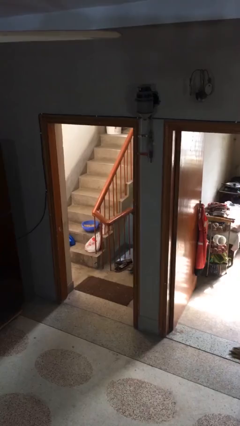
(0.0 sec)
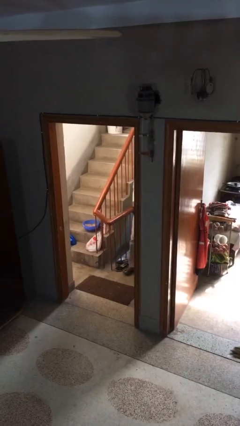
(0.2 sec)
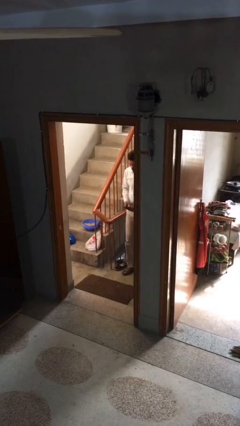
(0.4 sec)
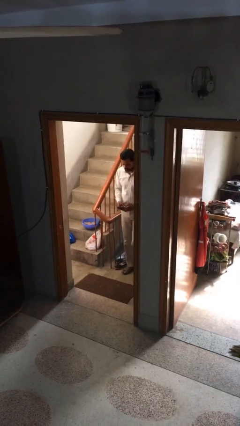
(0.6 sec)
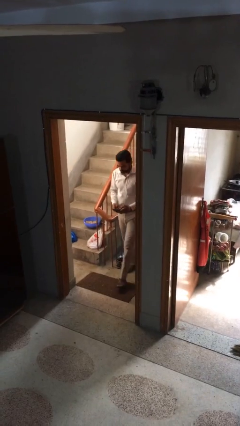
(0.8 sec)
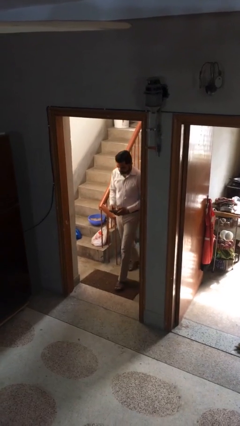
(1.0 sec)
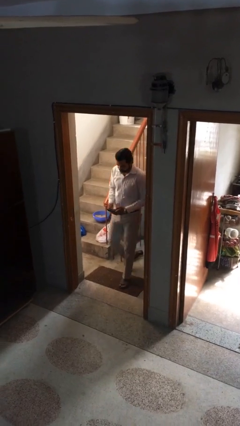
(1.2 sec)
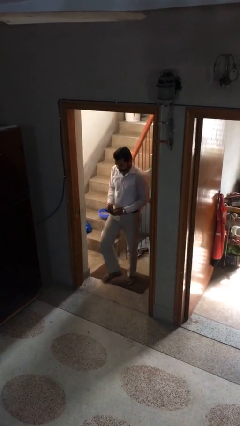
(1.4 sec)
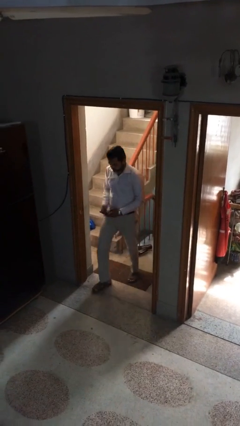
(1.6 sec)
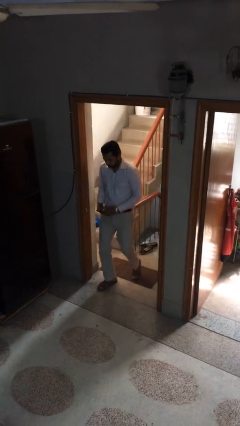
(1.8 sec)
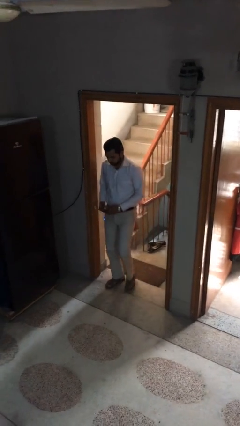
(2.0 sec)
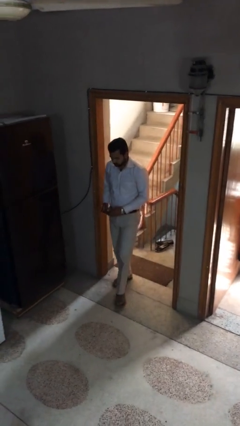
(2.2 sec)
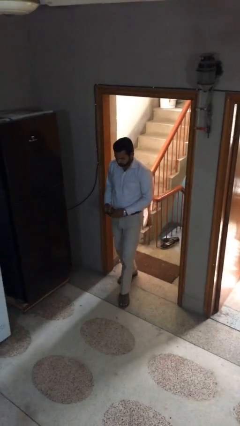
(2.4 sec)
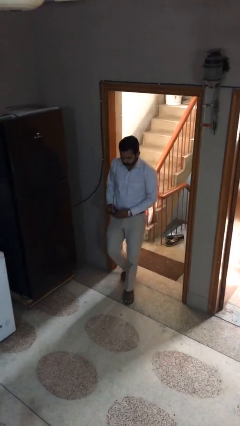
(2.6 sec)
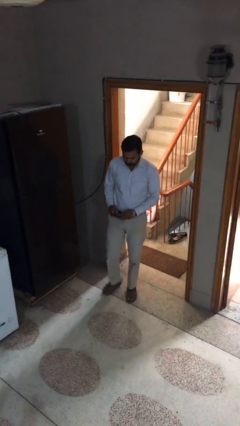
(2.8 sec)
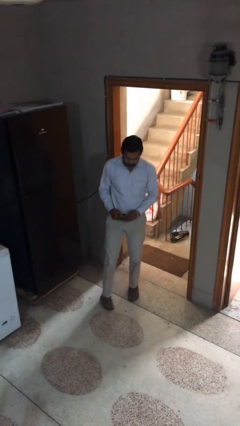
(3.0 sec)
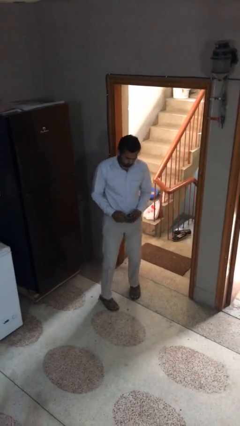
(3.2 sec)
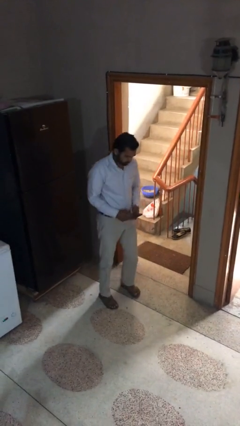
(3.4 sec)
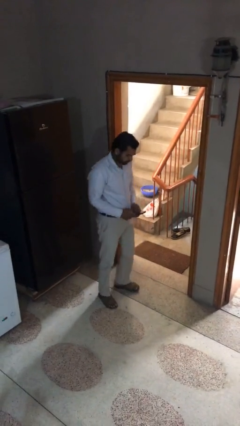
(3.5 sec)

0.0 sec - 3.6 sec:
person enters scene through structure

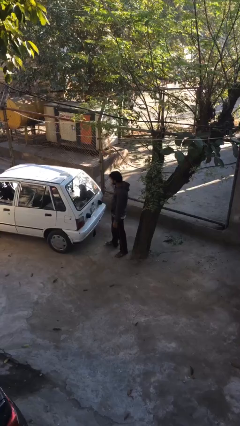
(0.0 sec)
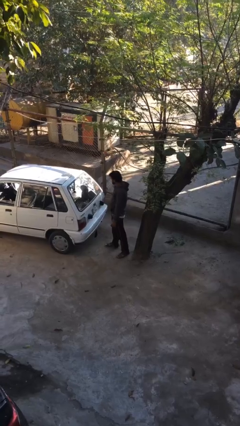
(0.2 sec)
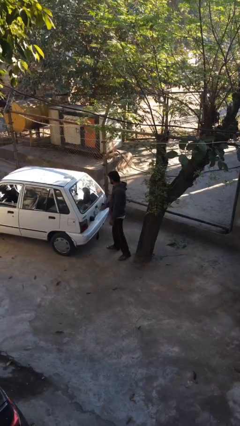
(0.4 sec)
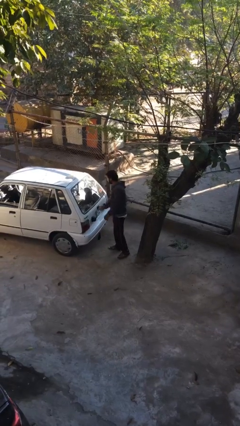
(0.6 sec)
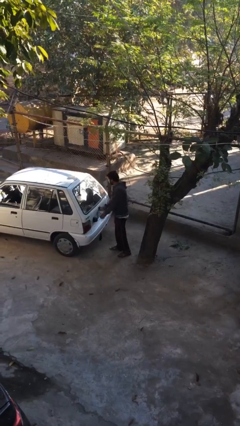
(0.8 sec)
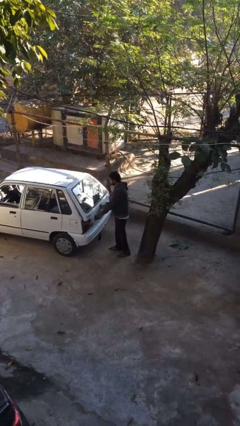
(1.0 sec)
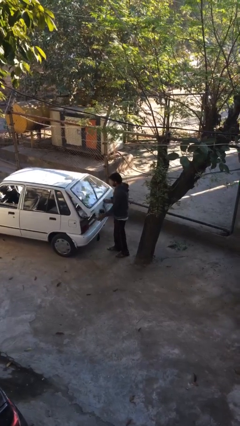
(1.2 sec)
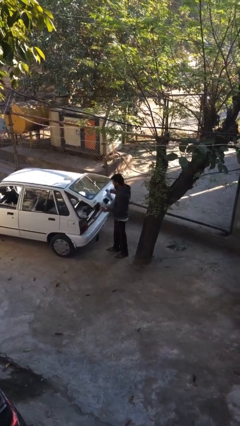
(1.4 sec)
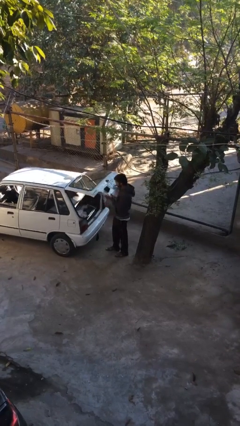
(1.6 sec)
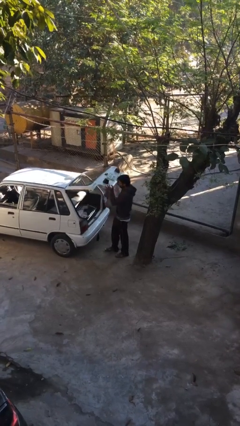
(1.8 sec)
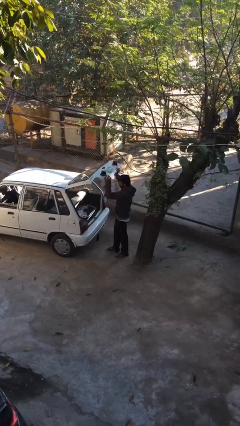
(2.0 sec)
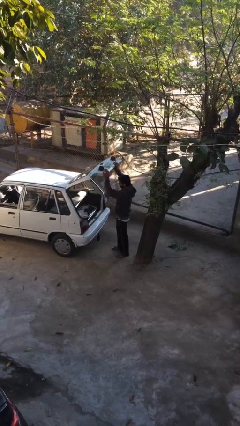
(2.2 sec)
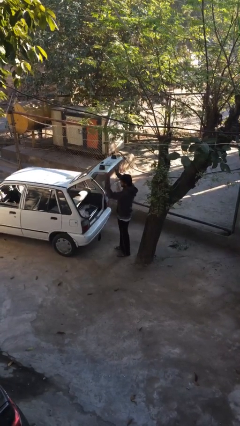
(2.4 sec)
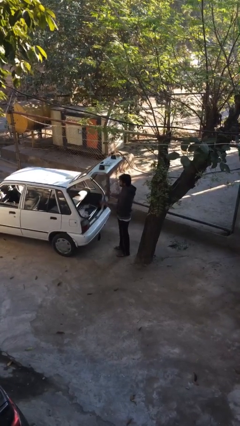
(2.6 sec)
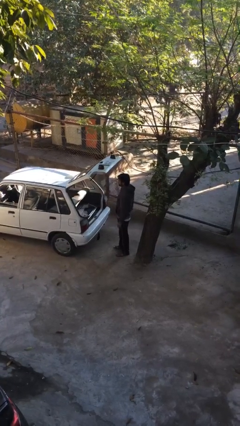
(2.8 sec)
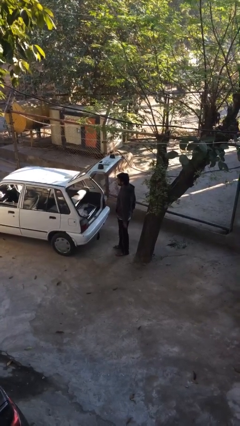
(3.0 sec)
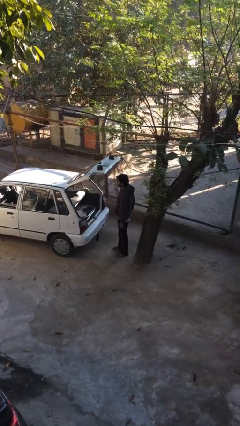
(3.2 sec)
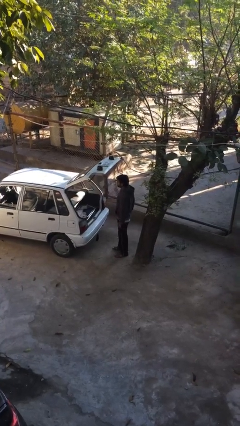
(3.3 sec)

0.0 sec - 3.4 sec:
person opens car trunk
